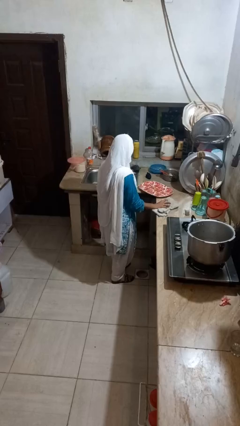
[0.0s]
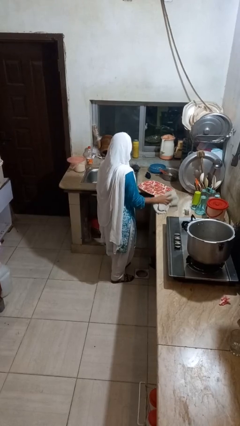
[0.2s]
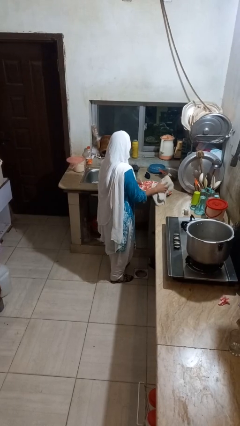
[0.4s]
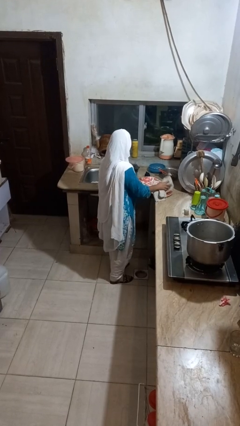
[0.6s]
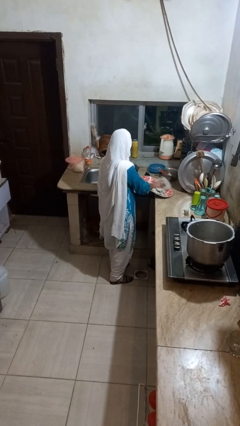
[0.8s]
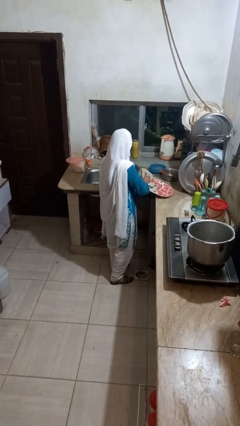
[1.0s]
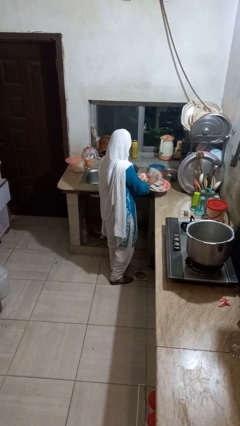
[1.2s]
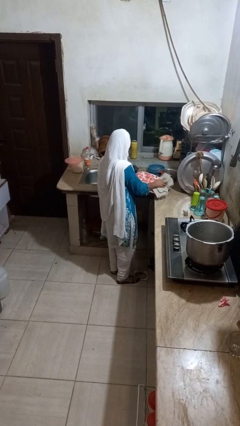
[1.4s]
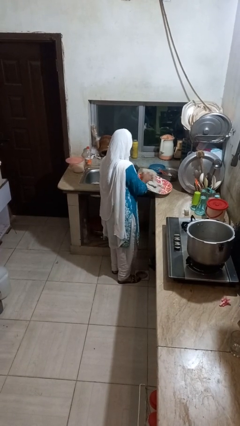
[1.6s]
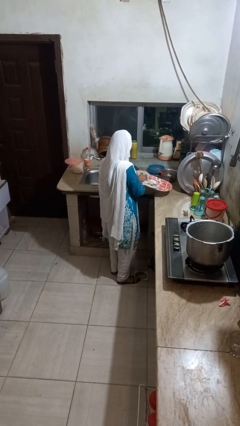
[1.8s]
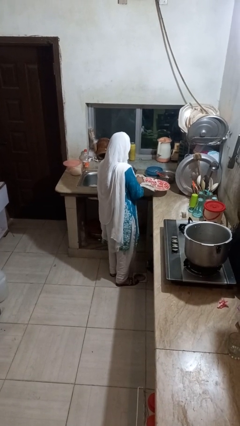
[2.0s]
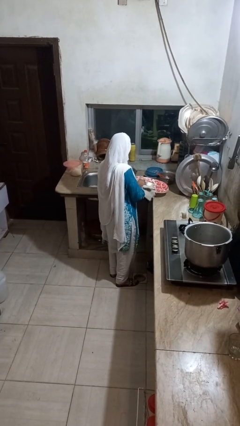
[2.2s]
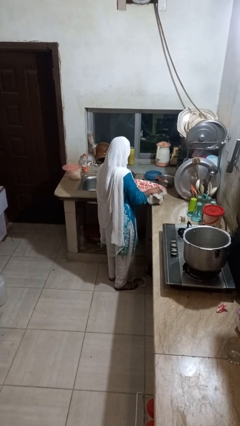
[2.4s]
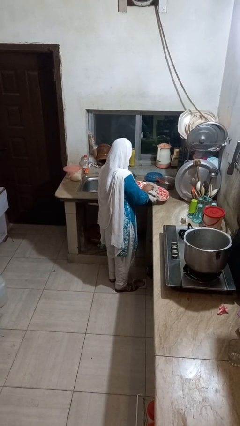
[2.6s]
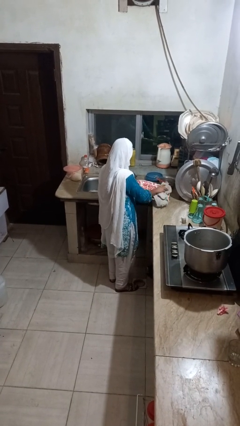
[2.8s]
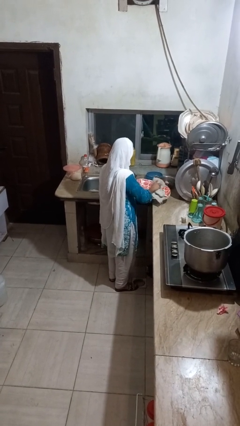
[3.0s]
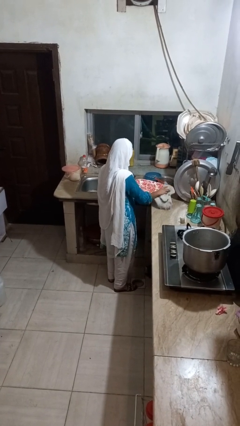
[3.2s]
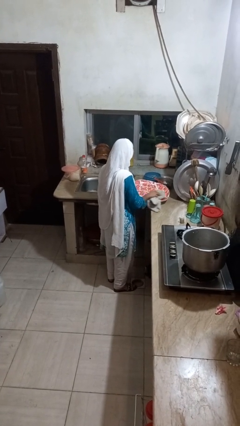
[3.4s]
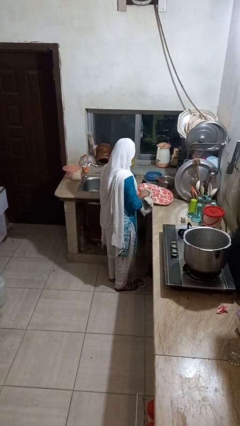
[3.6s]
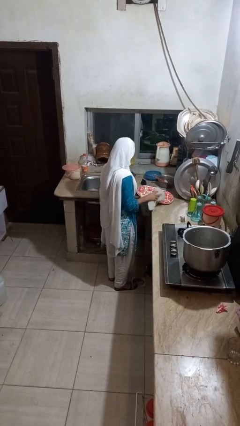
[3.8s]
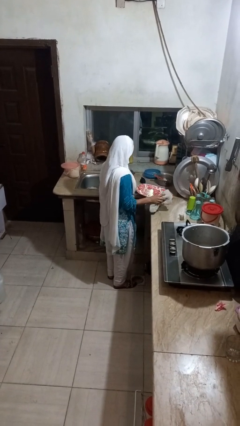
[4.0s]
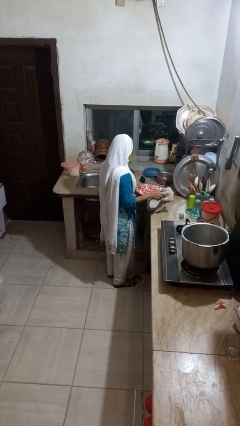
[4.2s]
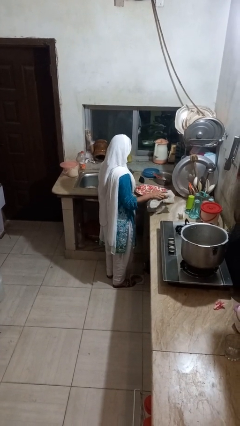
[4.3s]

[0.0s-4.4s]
person dries dish

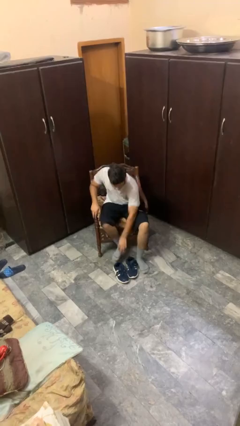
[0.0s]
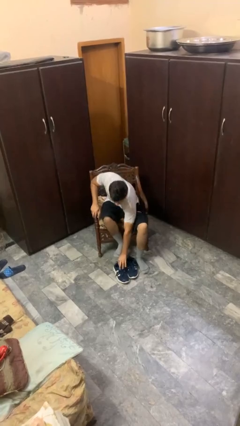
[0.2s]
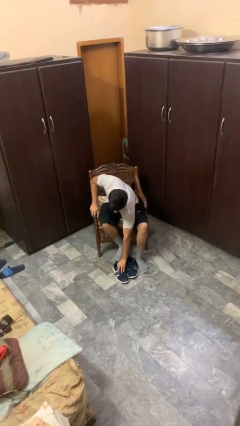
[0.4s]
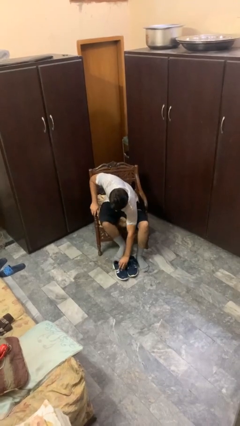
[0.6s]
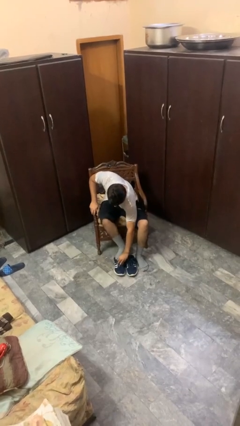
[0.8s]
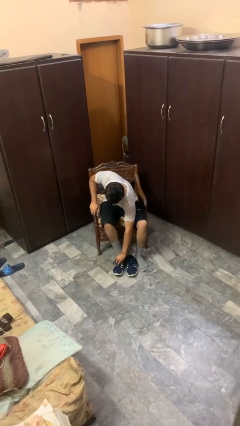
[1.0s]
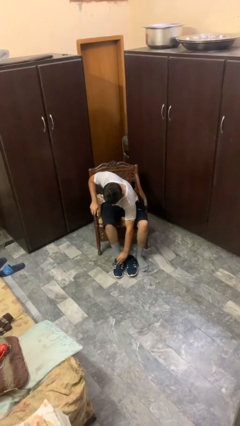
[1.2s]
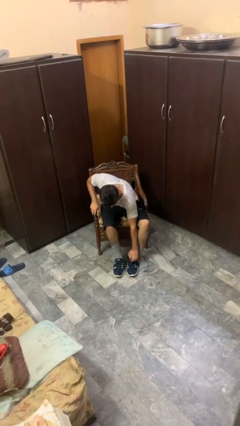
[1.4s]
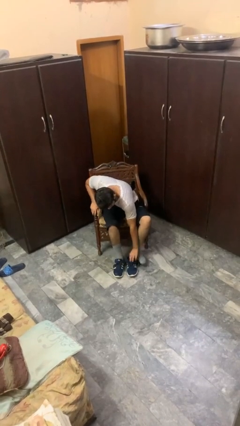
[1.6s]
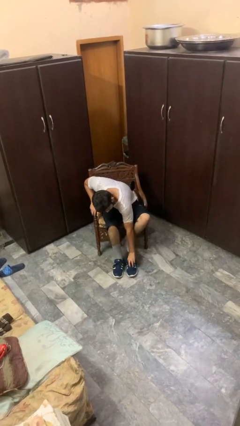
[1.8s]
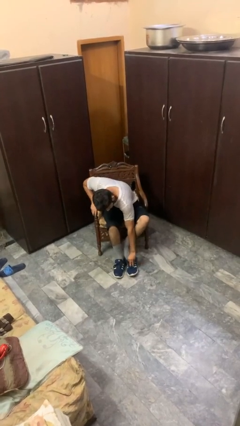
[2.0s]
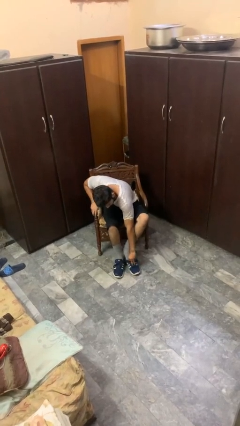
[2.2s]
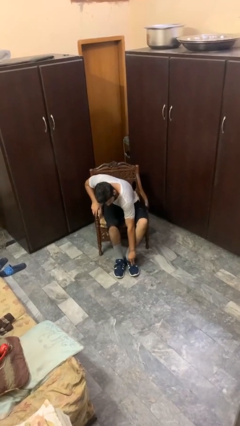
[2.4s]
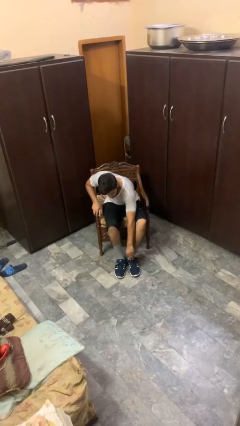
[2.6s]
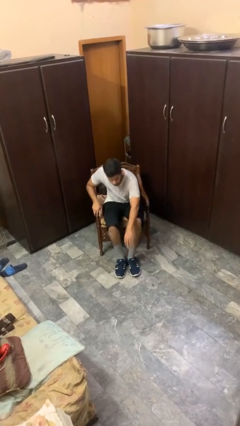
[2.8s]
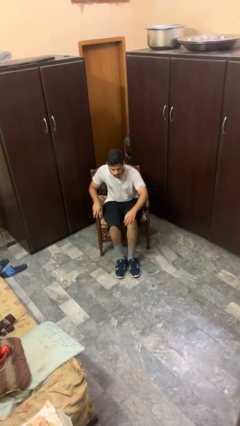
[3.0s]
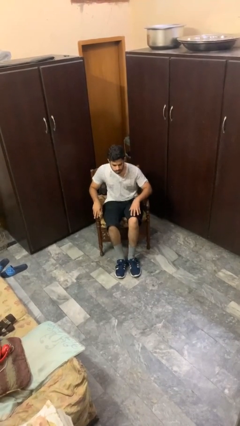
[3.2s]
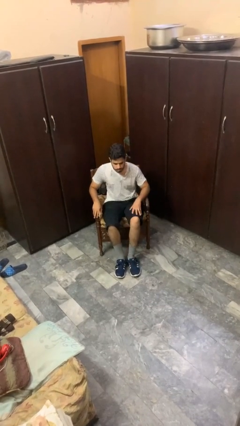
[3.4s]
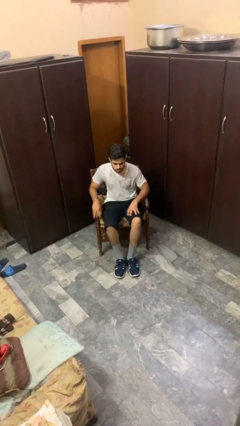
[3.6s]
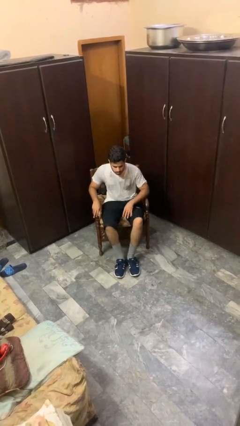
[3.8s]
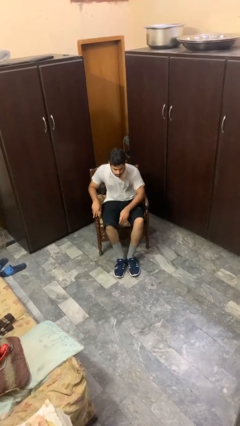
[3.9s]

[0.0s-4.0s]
person puts on shoes

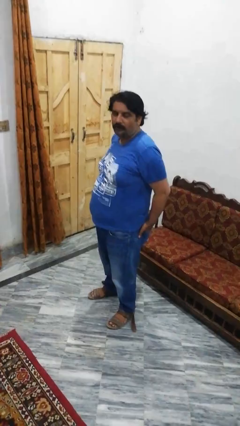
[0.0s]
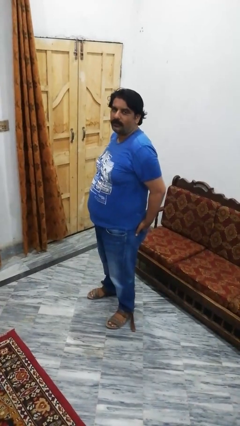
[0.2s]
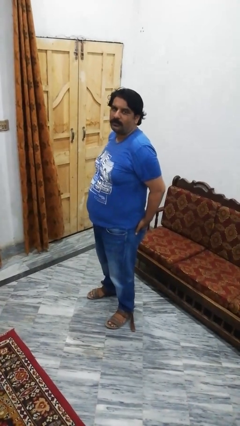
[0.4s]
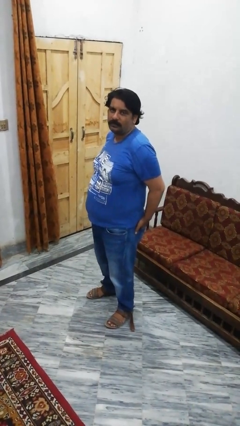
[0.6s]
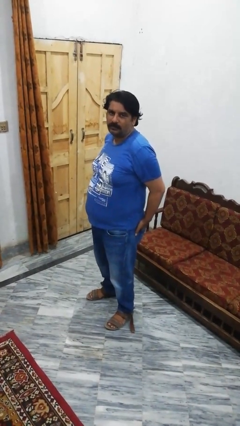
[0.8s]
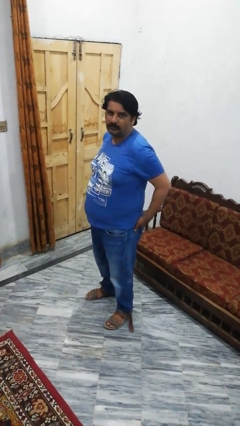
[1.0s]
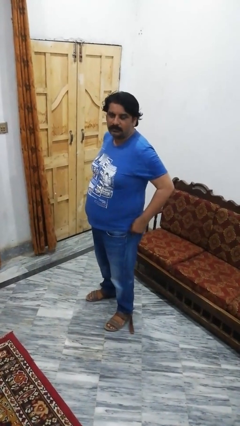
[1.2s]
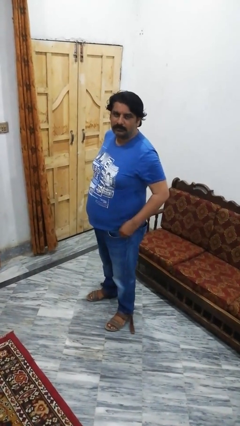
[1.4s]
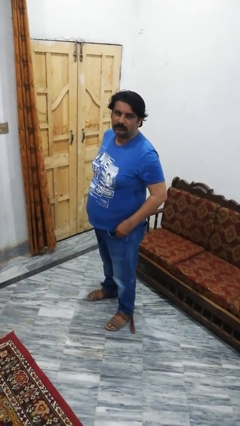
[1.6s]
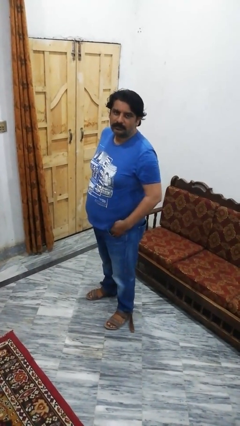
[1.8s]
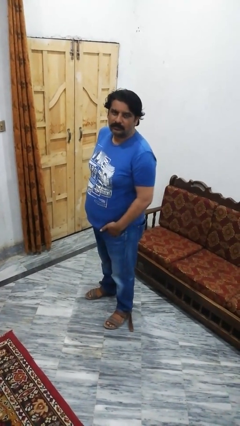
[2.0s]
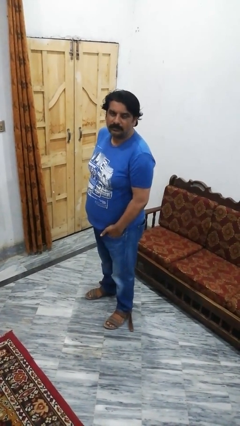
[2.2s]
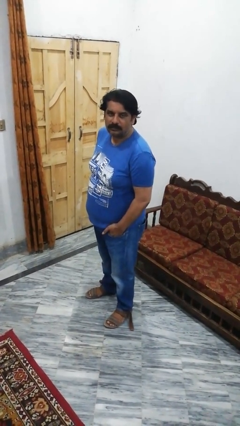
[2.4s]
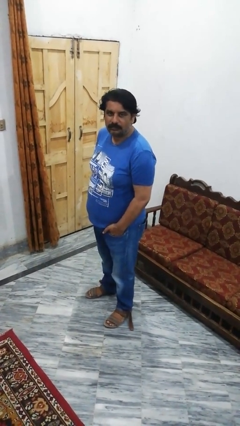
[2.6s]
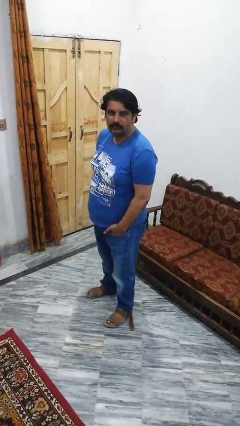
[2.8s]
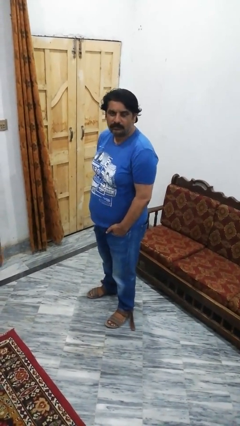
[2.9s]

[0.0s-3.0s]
person puts hands in back pockets

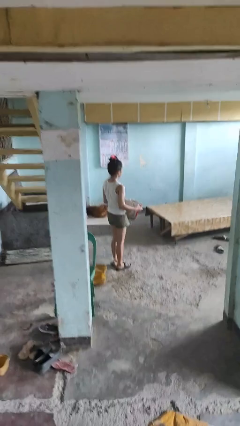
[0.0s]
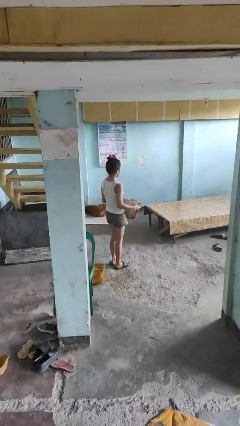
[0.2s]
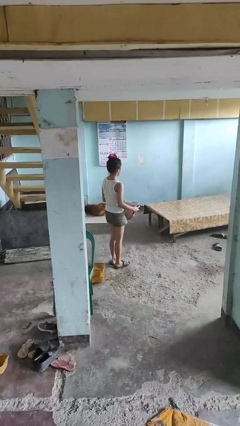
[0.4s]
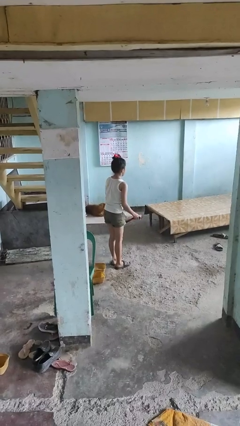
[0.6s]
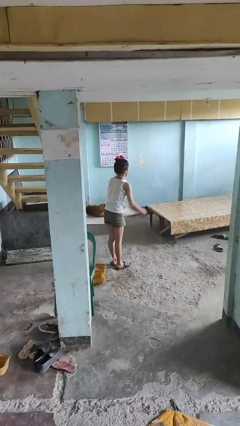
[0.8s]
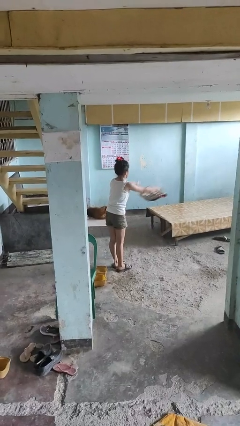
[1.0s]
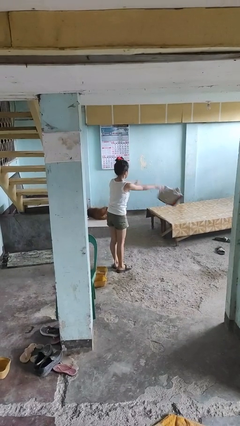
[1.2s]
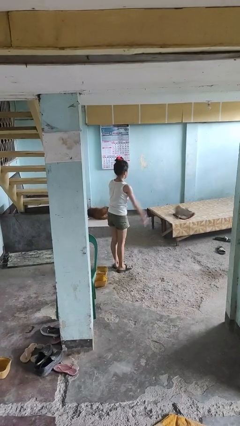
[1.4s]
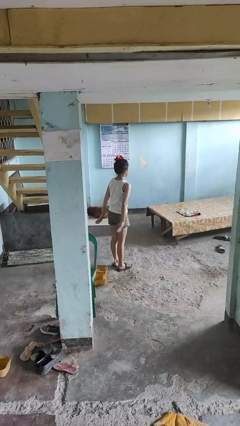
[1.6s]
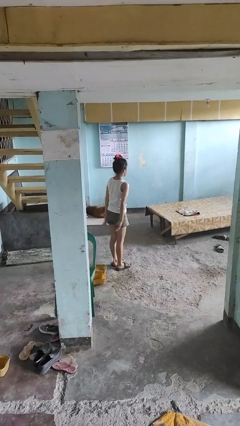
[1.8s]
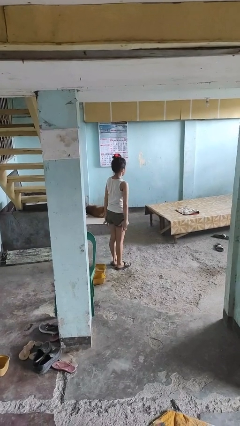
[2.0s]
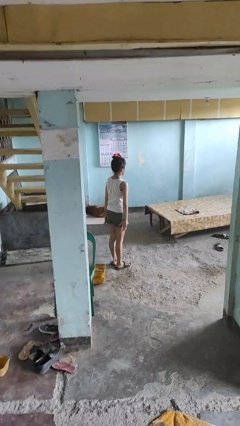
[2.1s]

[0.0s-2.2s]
person throws object on table

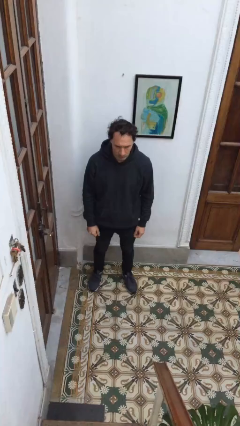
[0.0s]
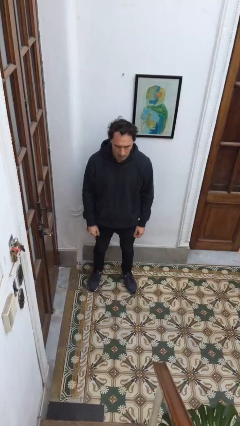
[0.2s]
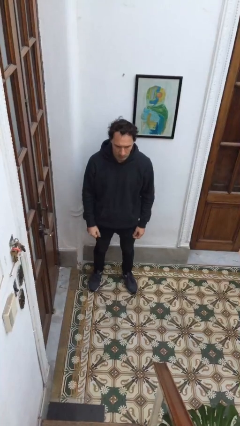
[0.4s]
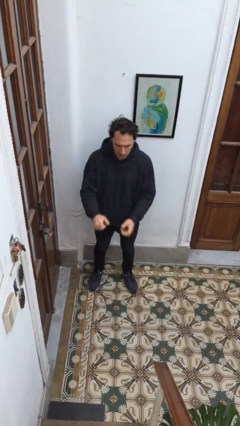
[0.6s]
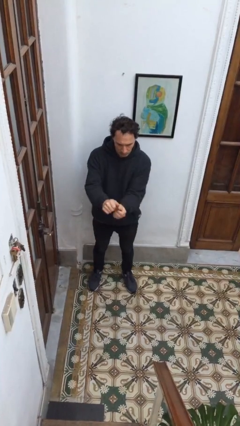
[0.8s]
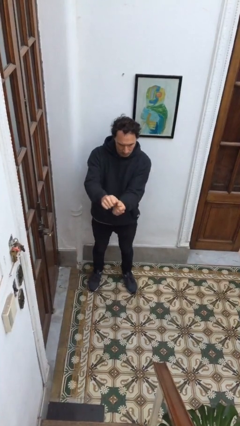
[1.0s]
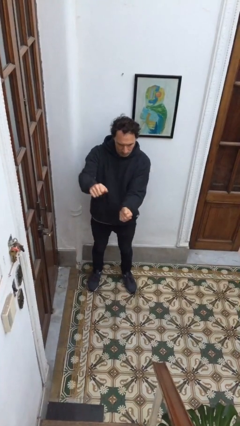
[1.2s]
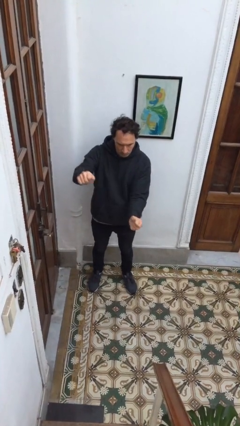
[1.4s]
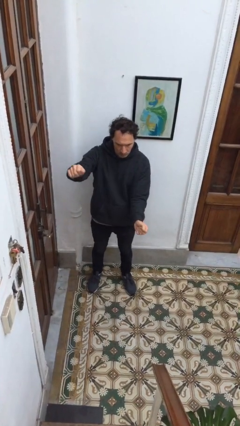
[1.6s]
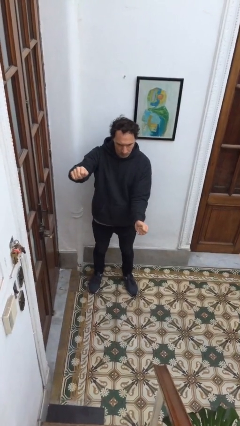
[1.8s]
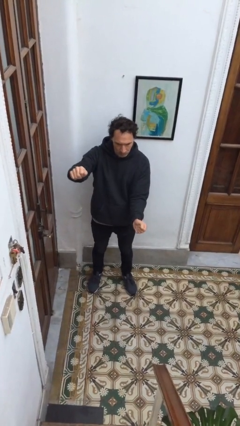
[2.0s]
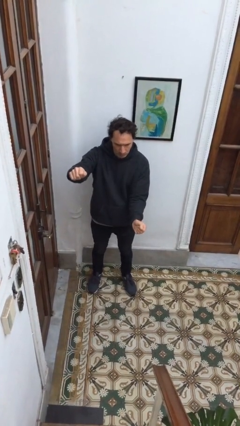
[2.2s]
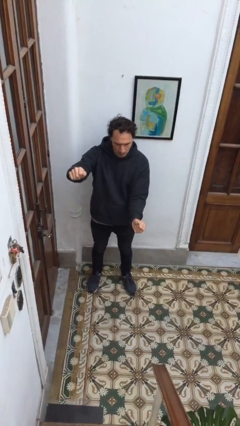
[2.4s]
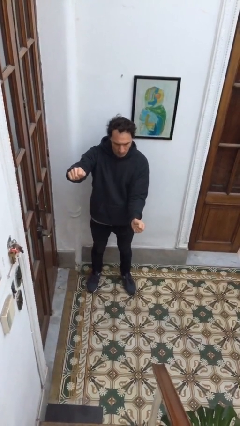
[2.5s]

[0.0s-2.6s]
person gestures zoom in

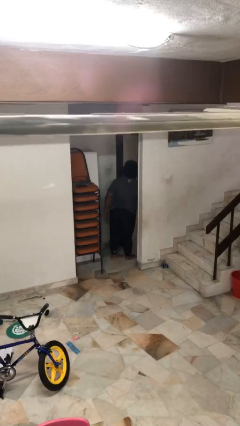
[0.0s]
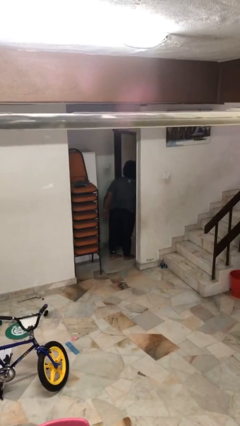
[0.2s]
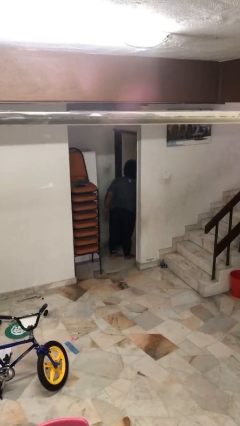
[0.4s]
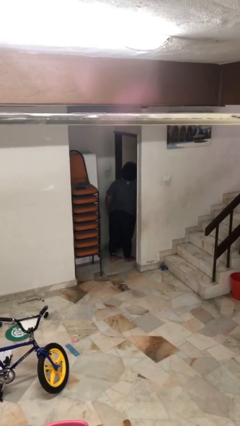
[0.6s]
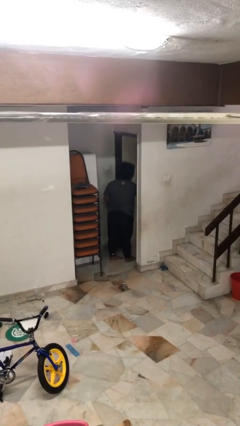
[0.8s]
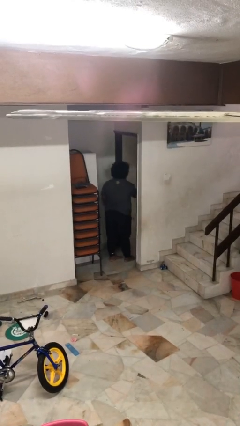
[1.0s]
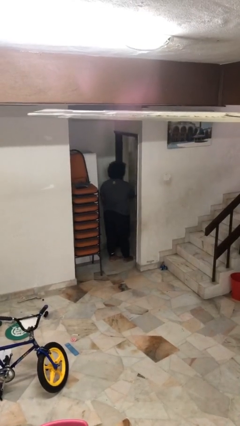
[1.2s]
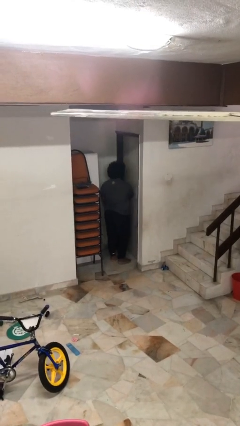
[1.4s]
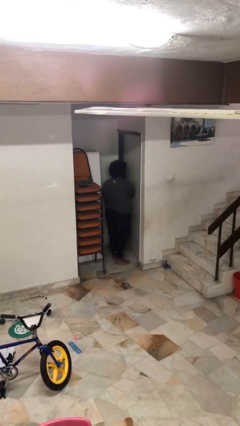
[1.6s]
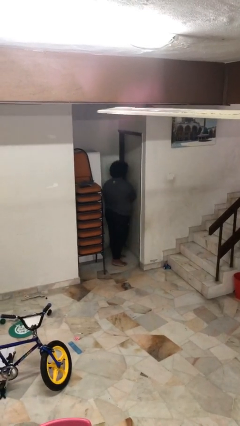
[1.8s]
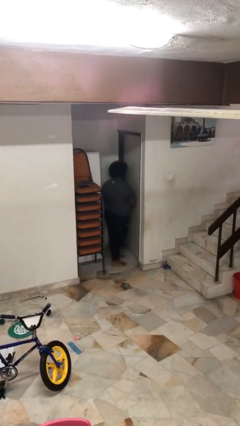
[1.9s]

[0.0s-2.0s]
person closes facility door
